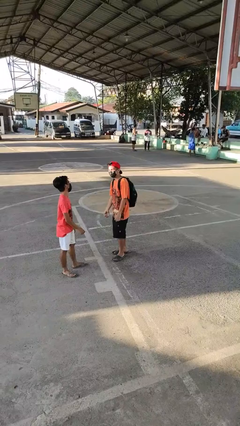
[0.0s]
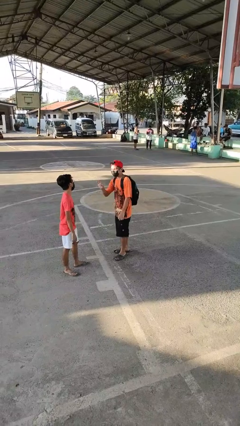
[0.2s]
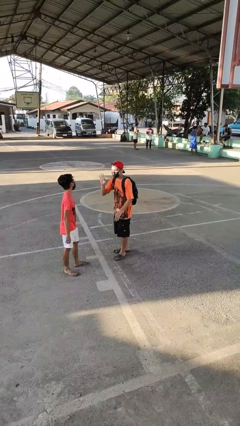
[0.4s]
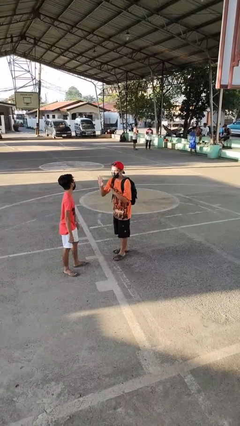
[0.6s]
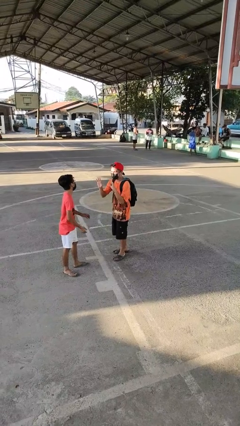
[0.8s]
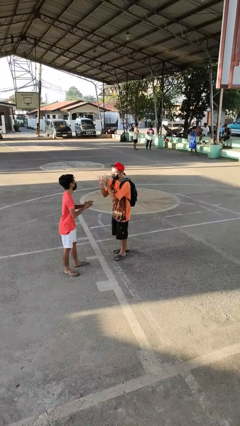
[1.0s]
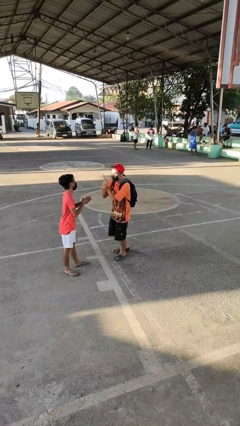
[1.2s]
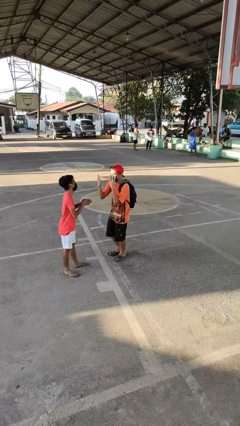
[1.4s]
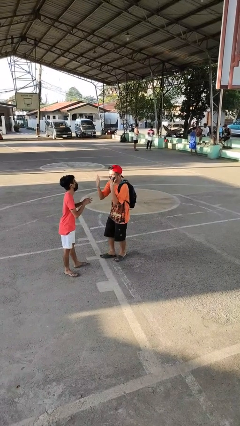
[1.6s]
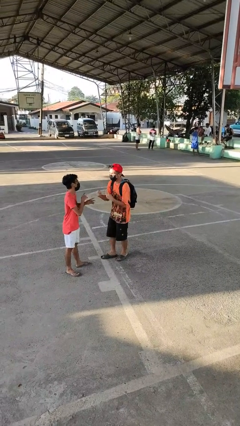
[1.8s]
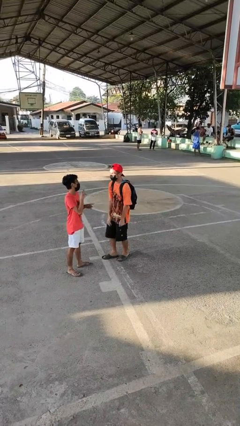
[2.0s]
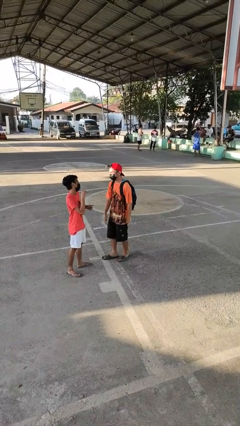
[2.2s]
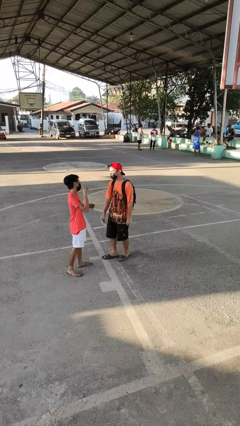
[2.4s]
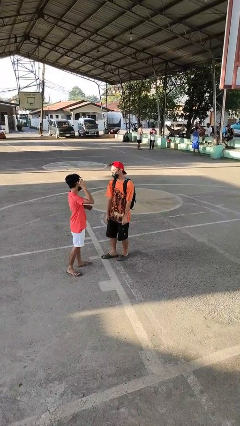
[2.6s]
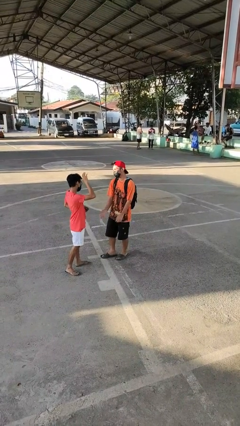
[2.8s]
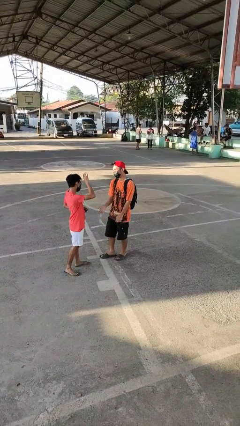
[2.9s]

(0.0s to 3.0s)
person talks to person

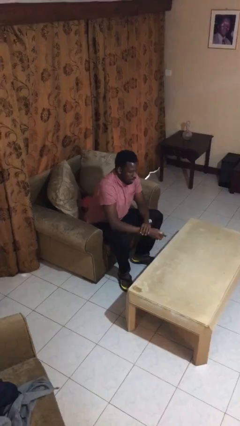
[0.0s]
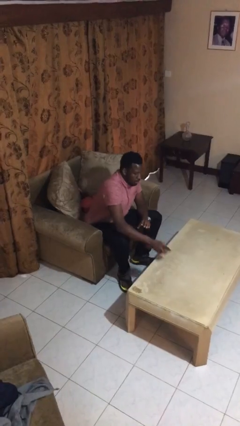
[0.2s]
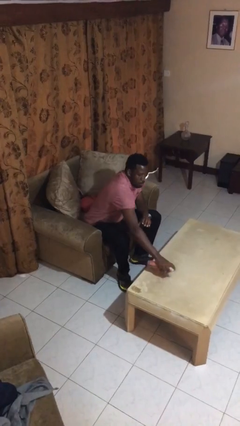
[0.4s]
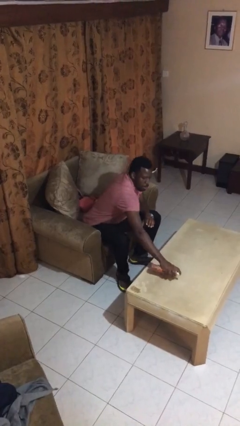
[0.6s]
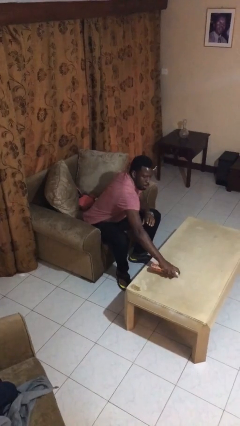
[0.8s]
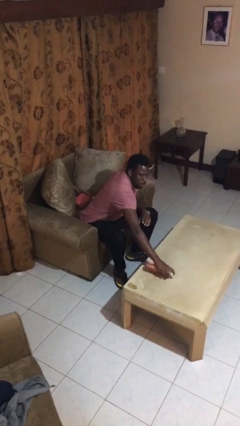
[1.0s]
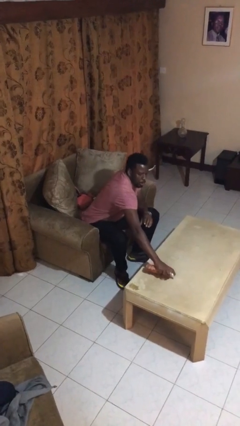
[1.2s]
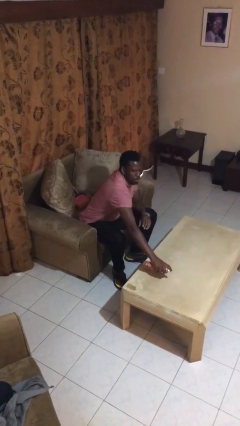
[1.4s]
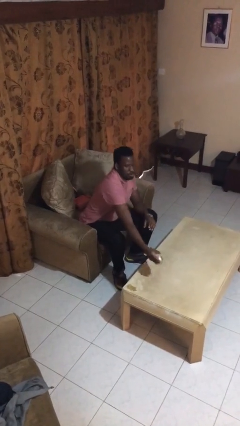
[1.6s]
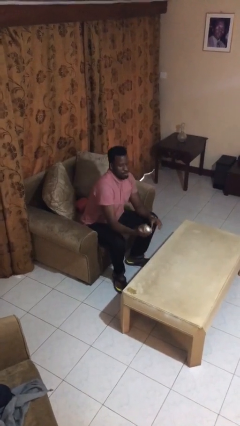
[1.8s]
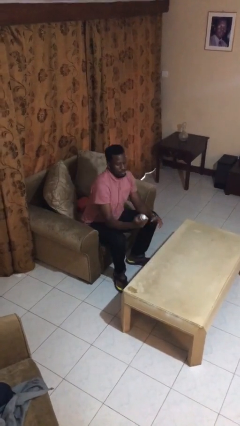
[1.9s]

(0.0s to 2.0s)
person sprays from bottle

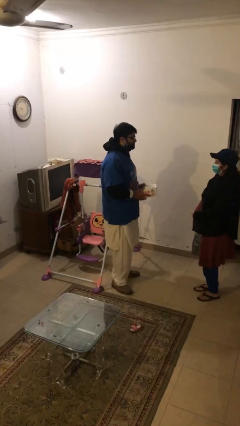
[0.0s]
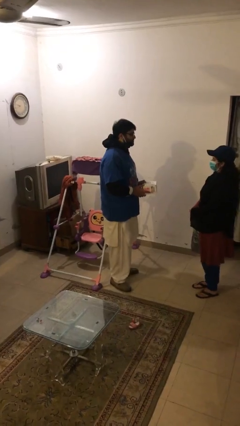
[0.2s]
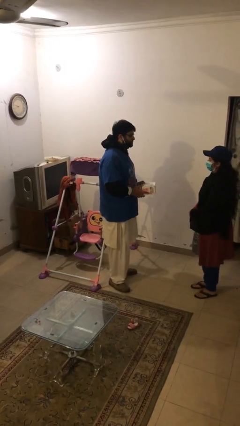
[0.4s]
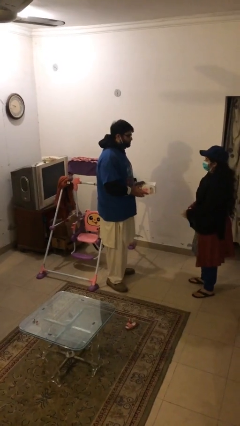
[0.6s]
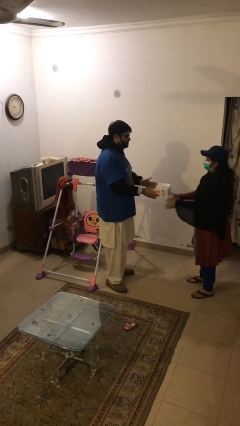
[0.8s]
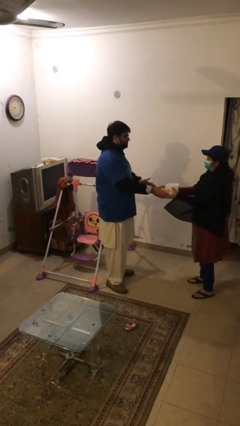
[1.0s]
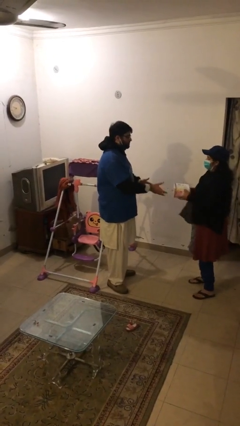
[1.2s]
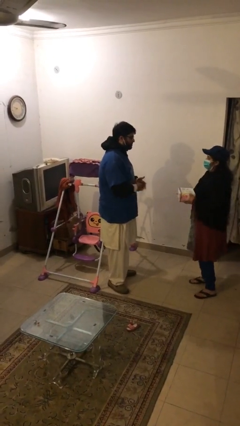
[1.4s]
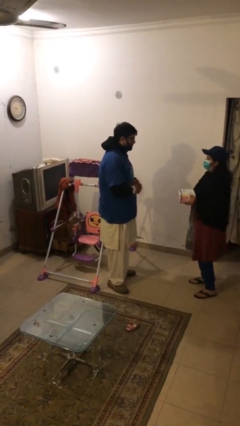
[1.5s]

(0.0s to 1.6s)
person transfers object to person

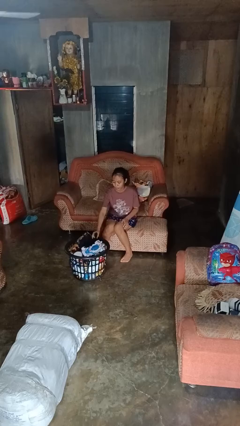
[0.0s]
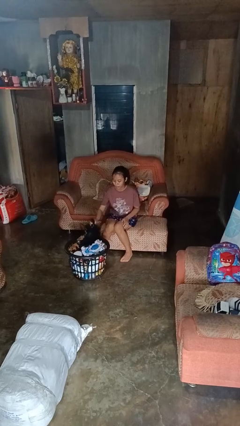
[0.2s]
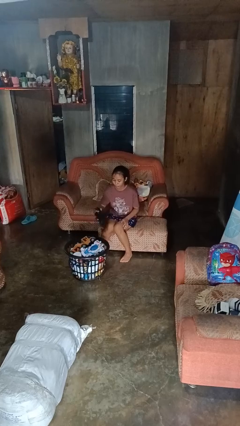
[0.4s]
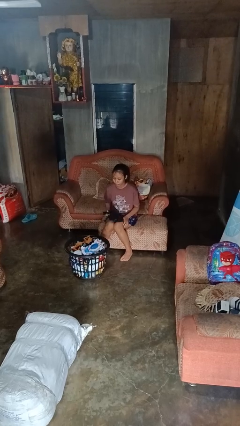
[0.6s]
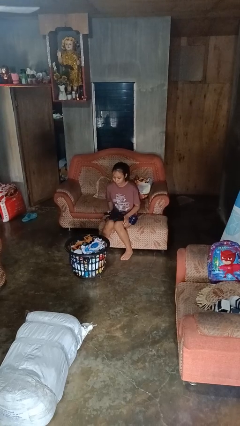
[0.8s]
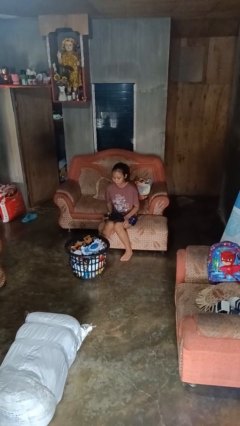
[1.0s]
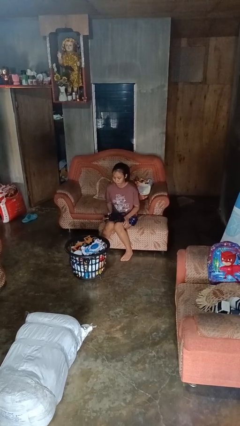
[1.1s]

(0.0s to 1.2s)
person takes object from basket

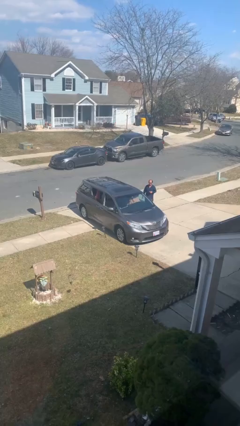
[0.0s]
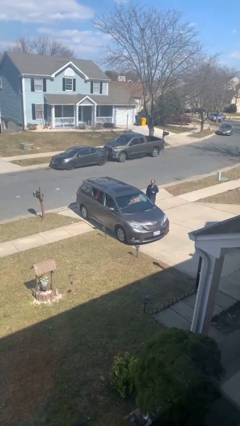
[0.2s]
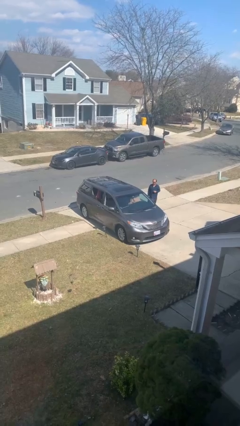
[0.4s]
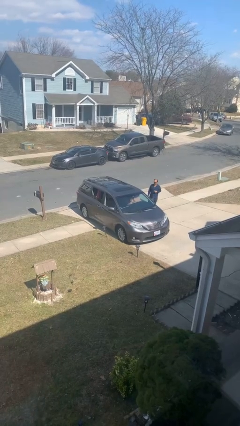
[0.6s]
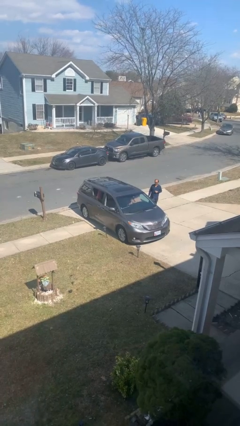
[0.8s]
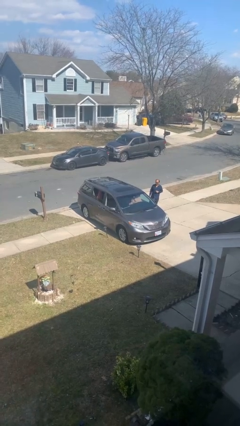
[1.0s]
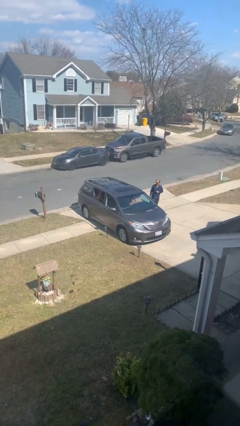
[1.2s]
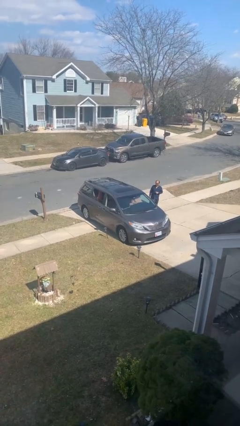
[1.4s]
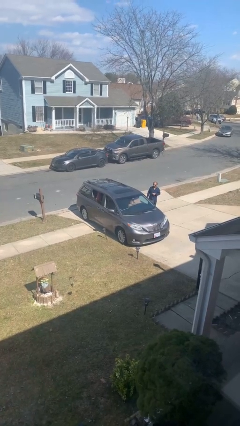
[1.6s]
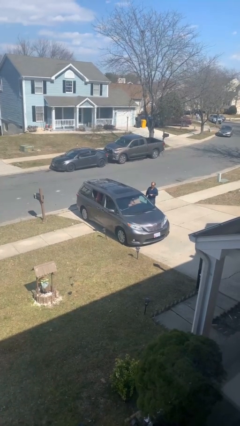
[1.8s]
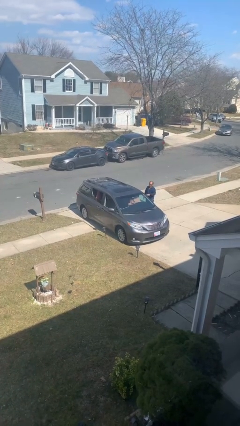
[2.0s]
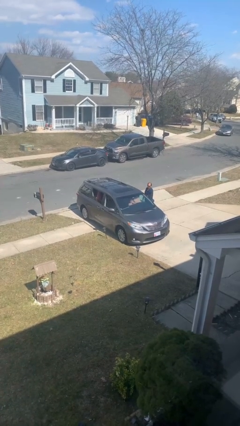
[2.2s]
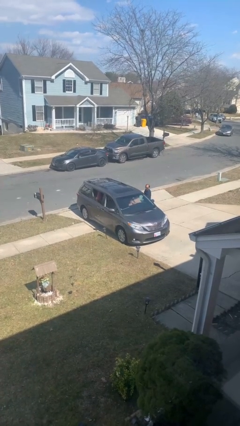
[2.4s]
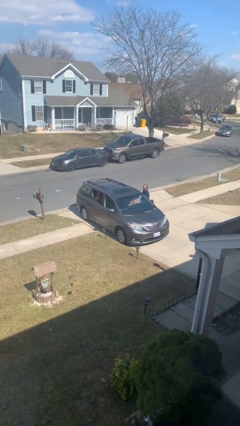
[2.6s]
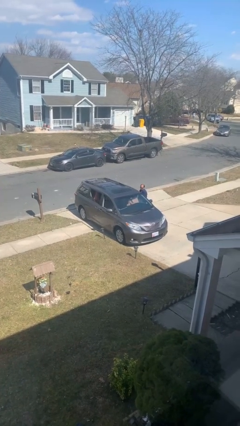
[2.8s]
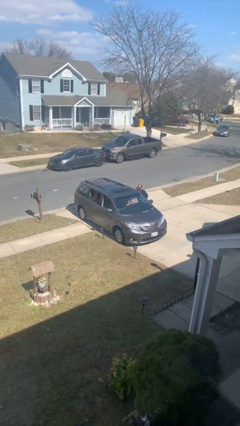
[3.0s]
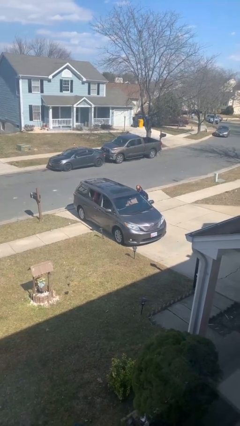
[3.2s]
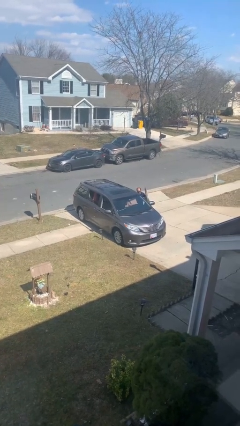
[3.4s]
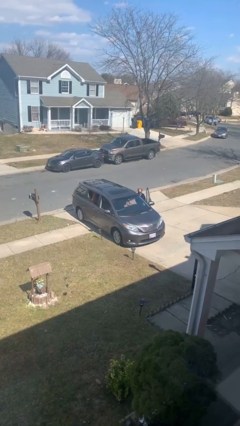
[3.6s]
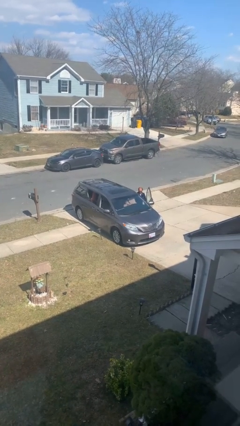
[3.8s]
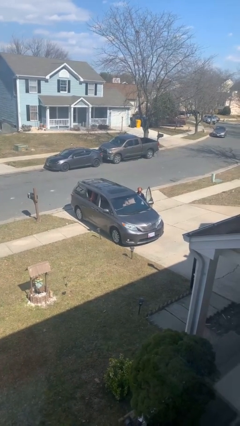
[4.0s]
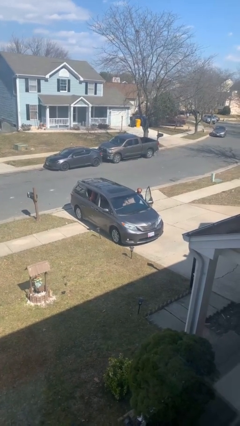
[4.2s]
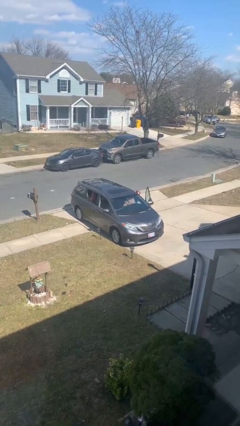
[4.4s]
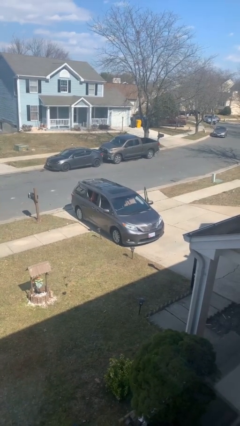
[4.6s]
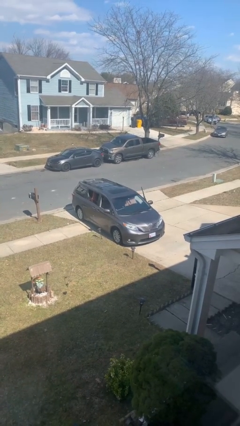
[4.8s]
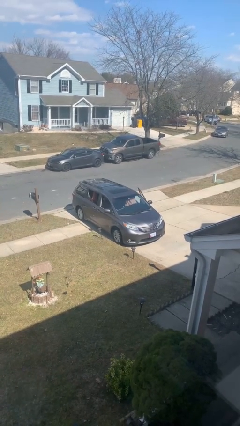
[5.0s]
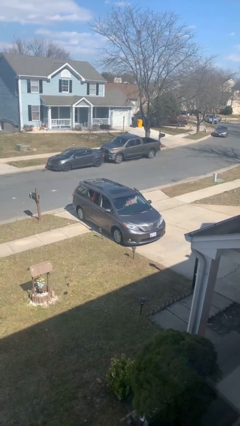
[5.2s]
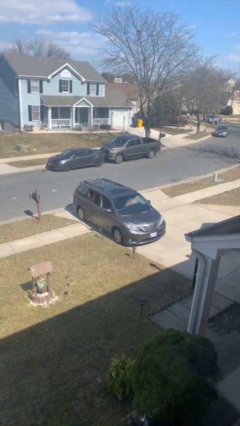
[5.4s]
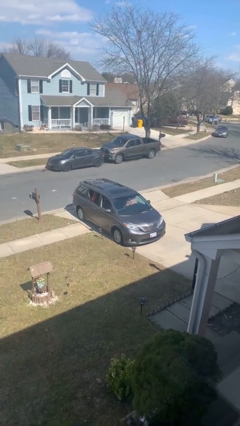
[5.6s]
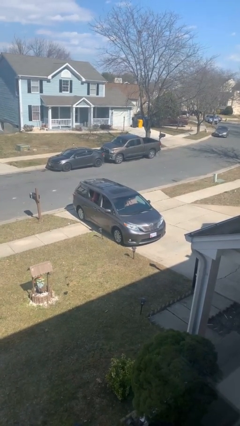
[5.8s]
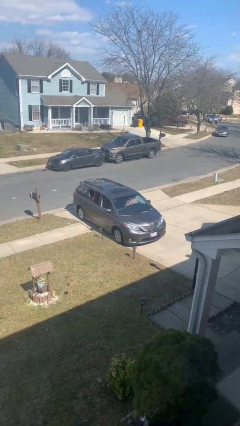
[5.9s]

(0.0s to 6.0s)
car picks up person

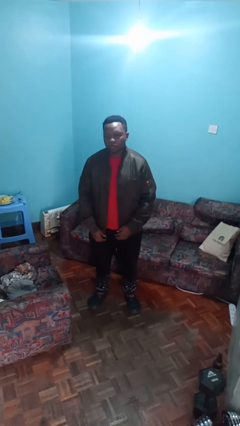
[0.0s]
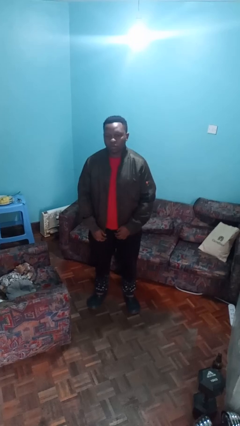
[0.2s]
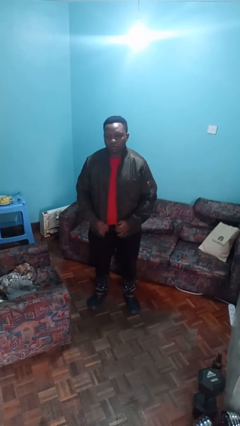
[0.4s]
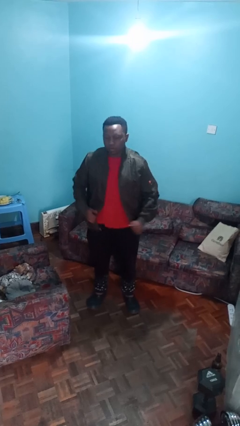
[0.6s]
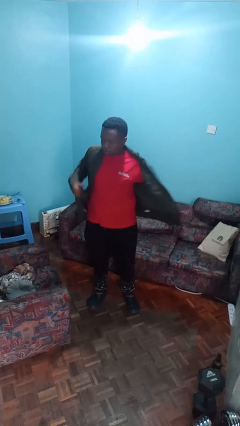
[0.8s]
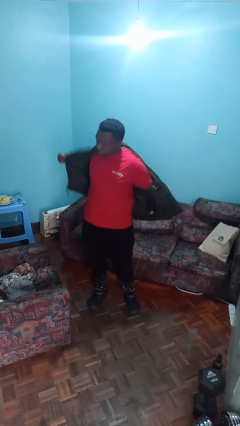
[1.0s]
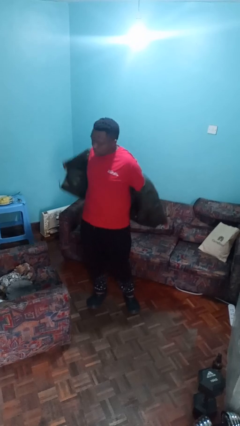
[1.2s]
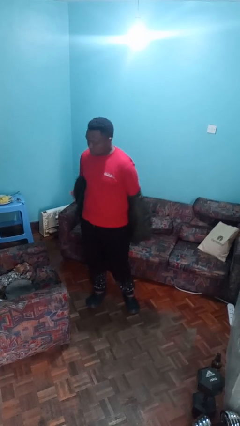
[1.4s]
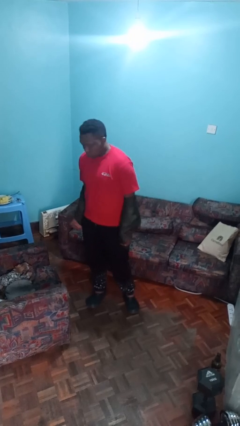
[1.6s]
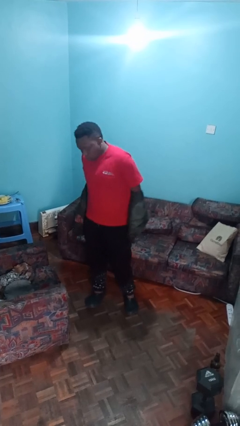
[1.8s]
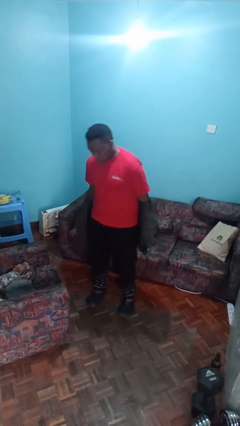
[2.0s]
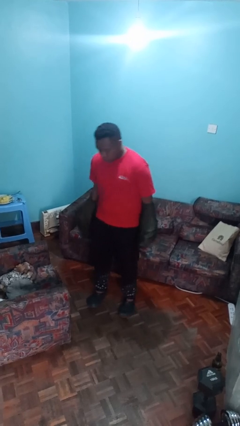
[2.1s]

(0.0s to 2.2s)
person takes off jacket

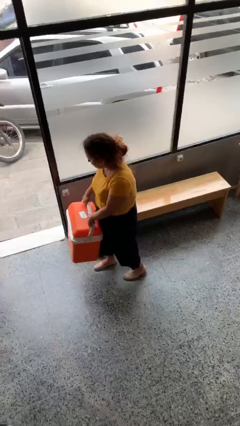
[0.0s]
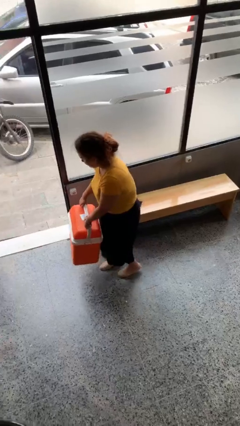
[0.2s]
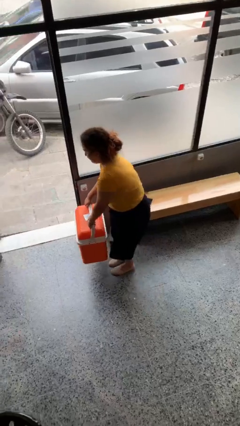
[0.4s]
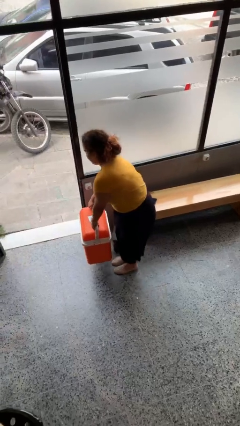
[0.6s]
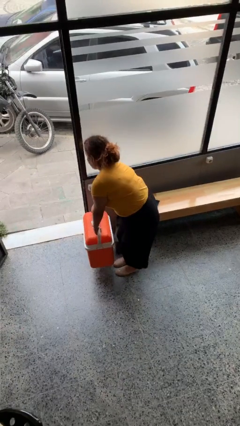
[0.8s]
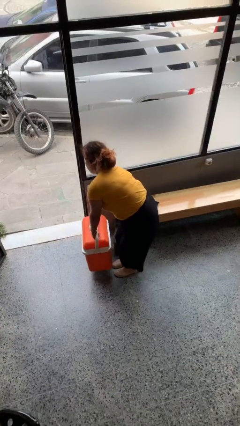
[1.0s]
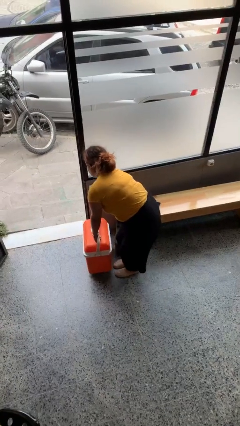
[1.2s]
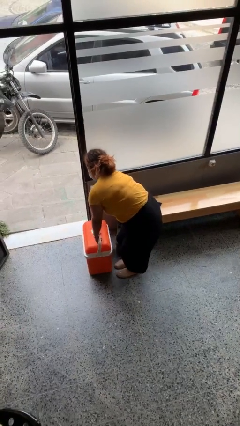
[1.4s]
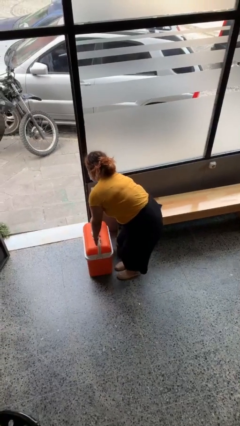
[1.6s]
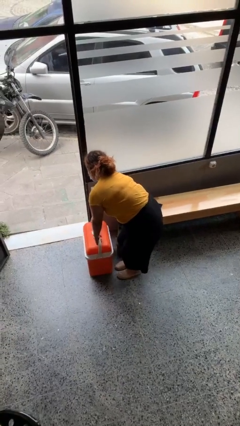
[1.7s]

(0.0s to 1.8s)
person puts down object on floor
